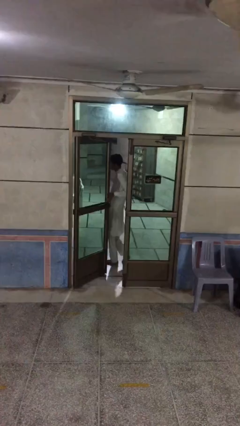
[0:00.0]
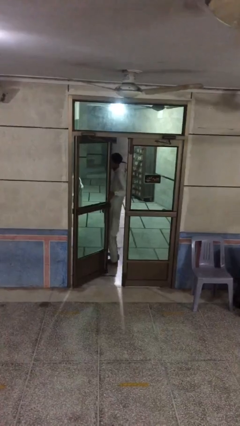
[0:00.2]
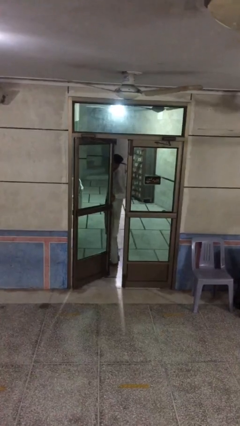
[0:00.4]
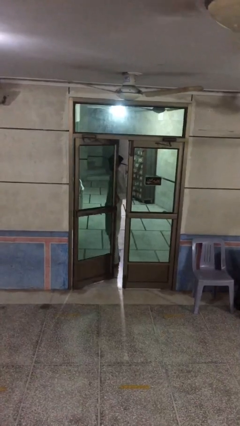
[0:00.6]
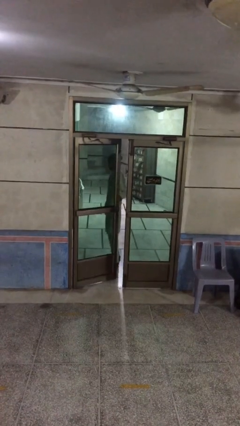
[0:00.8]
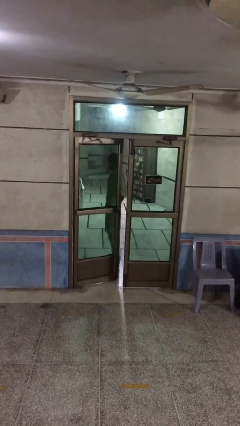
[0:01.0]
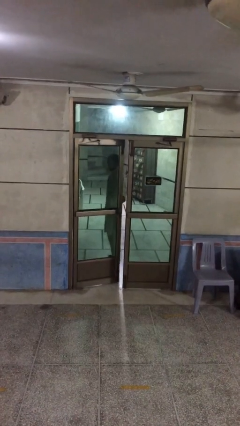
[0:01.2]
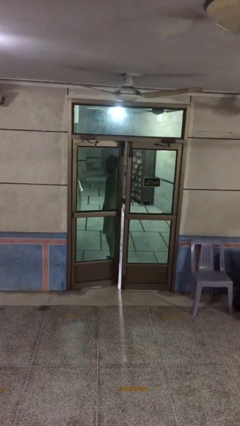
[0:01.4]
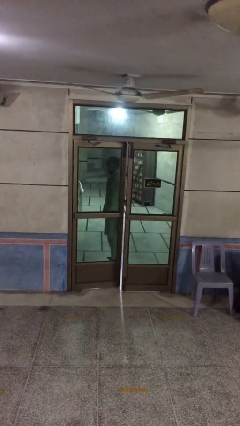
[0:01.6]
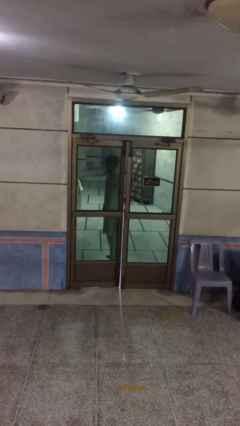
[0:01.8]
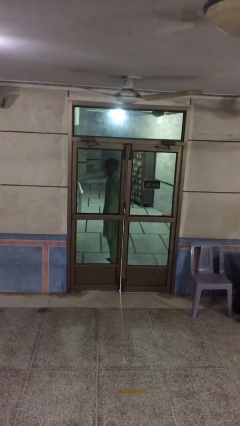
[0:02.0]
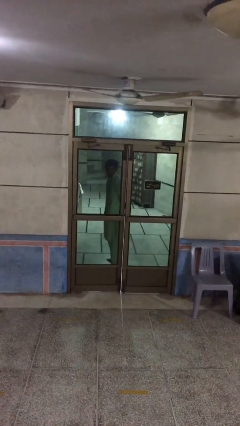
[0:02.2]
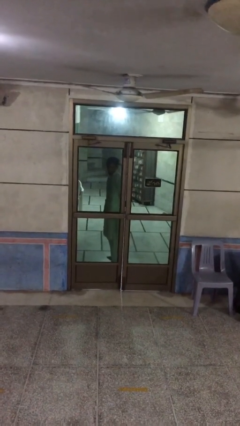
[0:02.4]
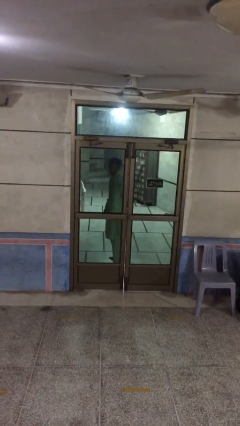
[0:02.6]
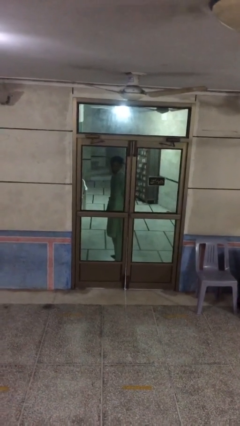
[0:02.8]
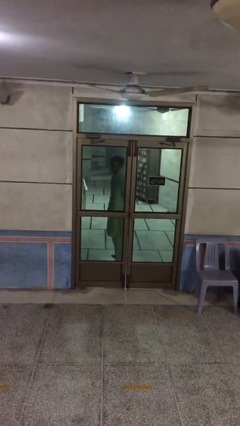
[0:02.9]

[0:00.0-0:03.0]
person closes facility door

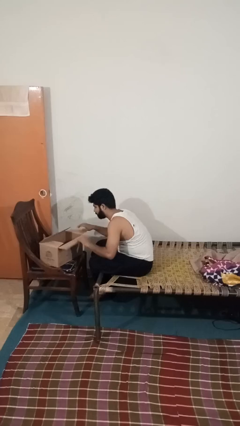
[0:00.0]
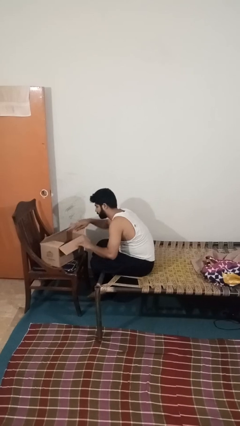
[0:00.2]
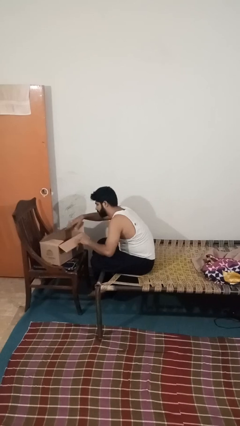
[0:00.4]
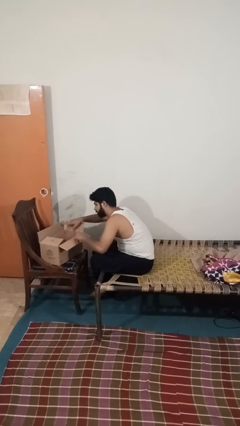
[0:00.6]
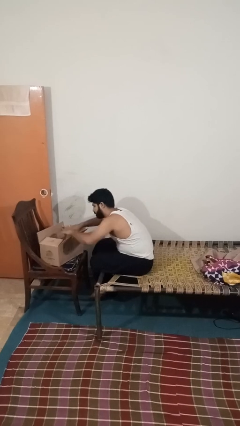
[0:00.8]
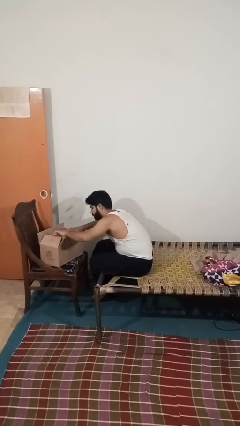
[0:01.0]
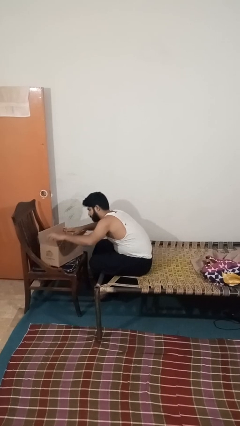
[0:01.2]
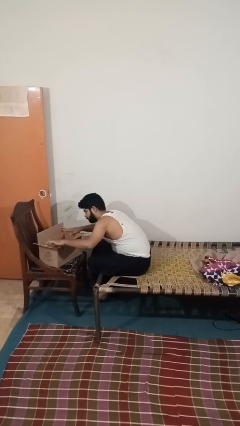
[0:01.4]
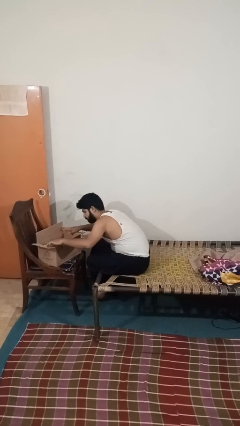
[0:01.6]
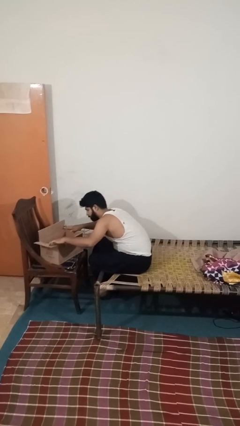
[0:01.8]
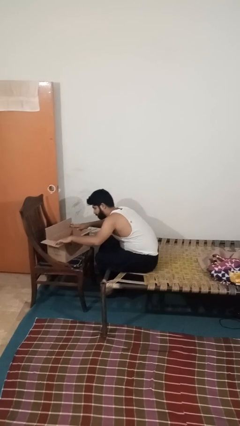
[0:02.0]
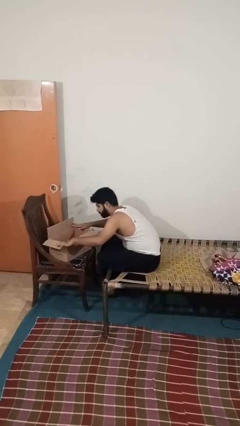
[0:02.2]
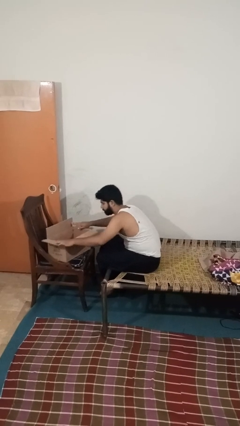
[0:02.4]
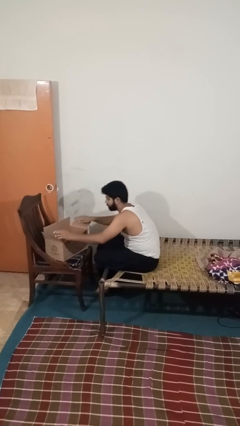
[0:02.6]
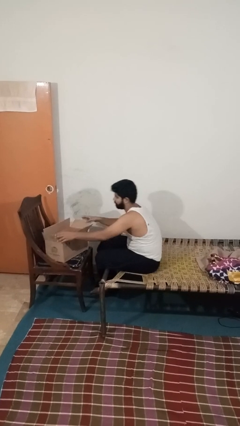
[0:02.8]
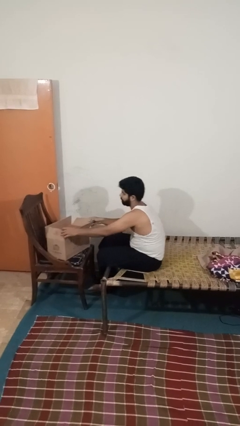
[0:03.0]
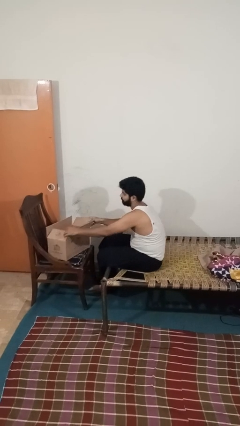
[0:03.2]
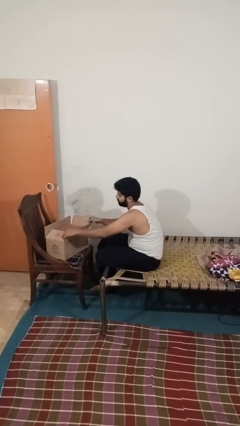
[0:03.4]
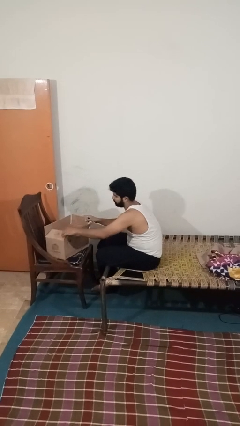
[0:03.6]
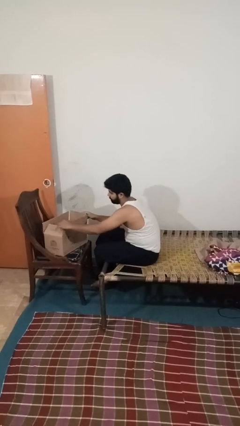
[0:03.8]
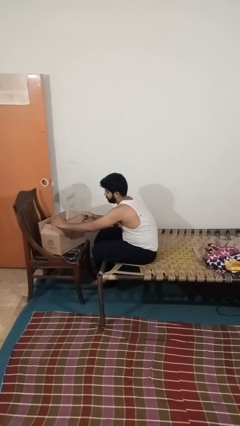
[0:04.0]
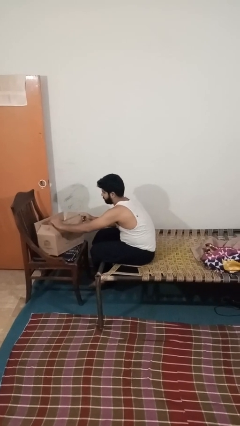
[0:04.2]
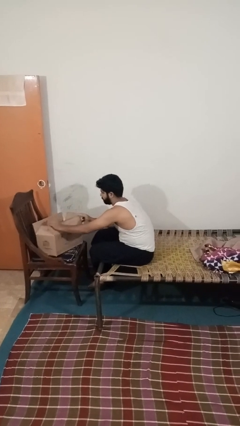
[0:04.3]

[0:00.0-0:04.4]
person opens box

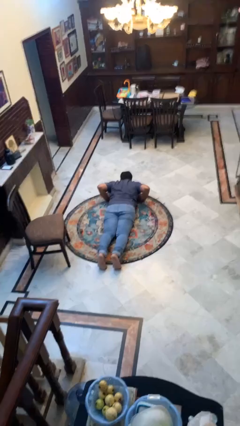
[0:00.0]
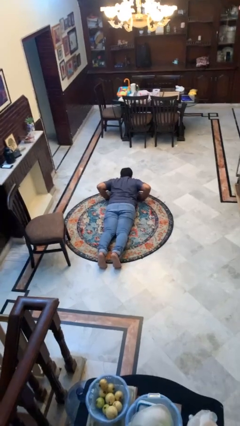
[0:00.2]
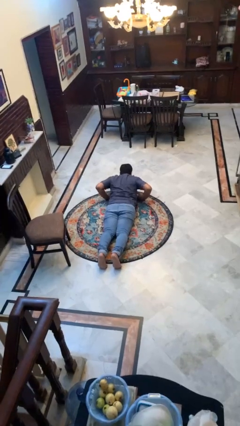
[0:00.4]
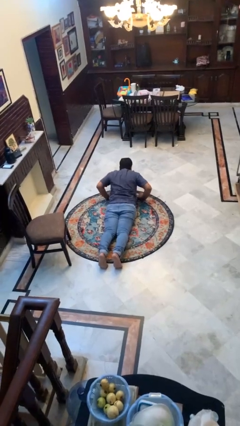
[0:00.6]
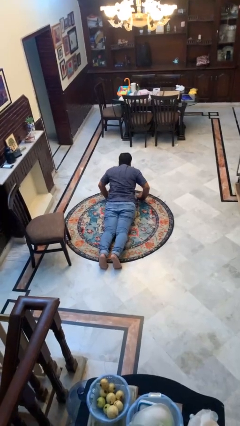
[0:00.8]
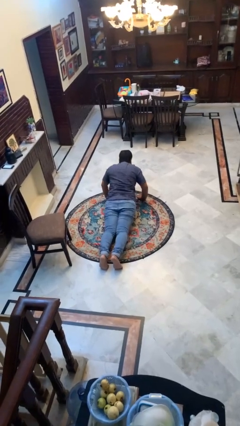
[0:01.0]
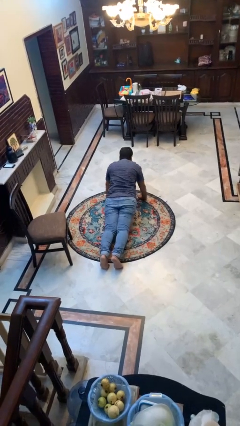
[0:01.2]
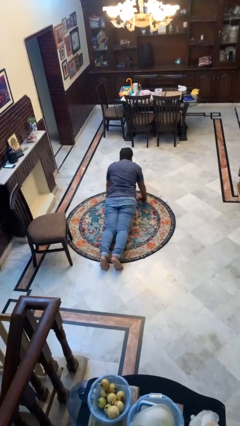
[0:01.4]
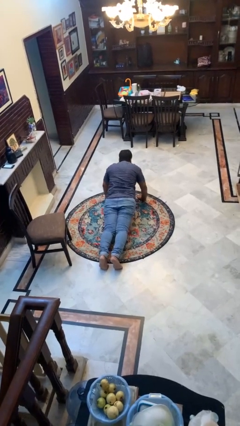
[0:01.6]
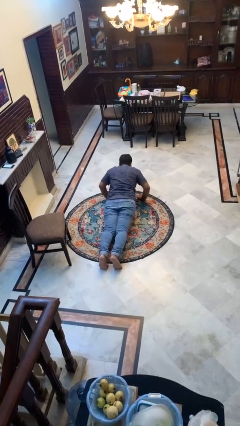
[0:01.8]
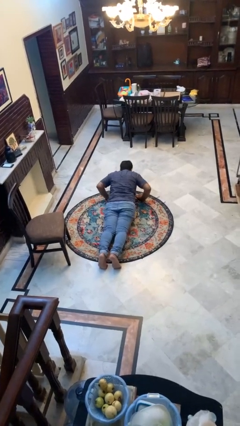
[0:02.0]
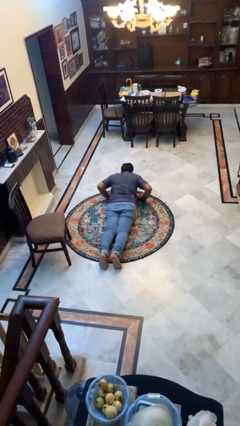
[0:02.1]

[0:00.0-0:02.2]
person exercises with pushup

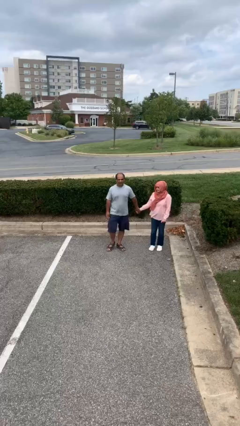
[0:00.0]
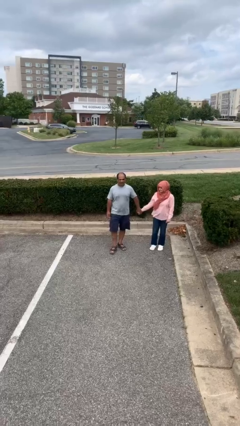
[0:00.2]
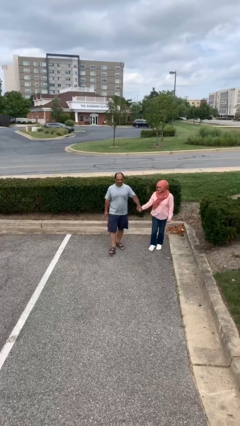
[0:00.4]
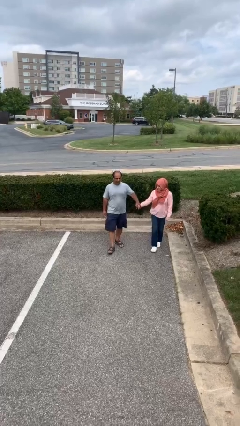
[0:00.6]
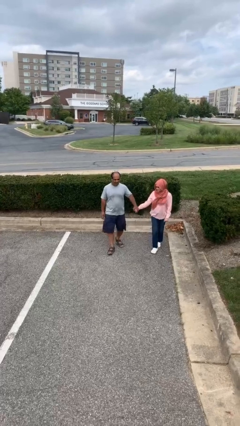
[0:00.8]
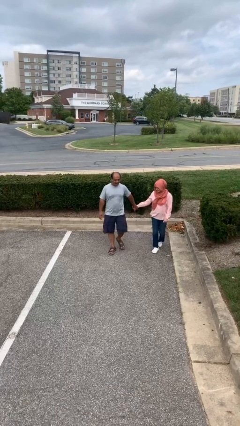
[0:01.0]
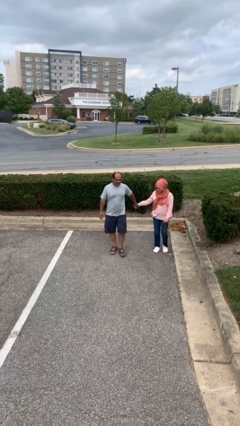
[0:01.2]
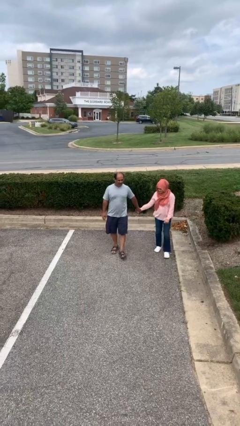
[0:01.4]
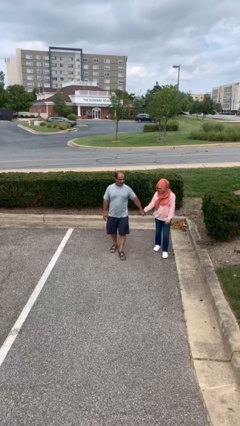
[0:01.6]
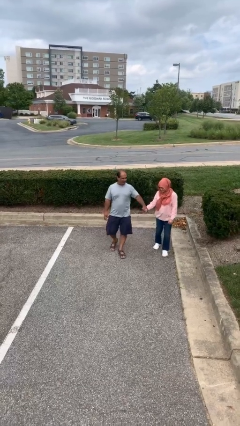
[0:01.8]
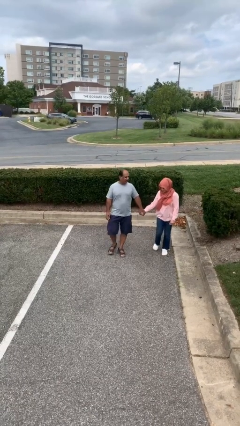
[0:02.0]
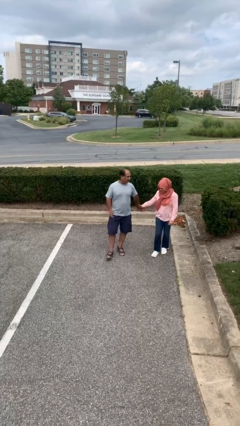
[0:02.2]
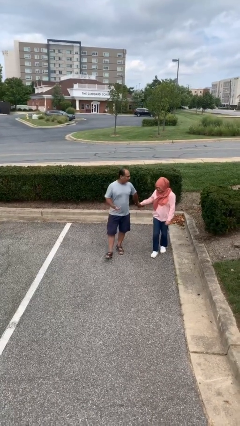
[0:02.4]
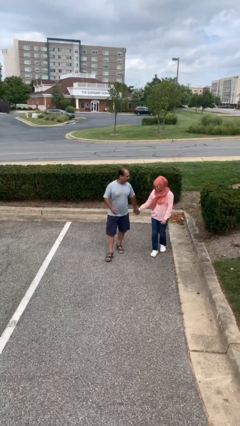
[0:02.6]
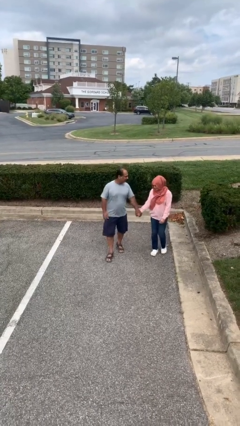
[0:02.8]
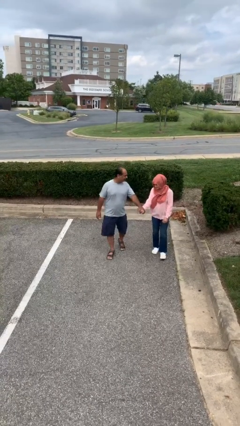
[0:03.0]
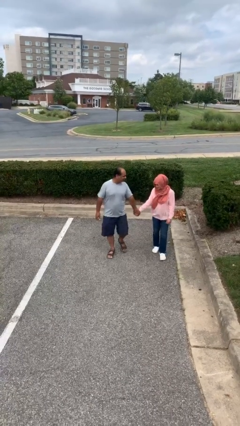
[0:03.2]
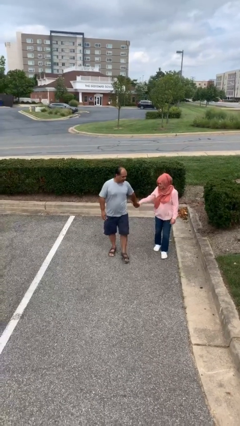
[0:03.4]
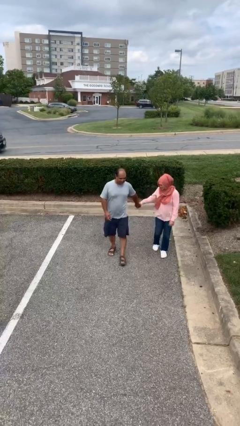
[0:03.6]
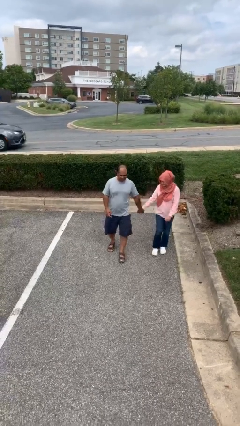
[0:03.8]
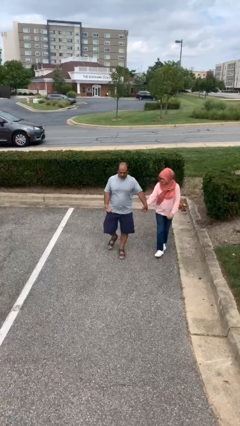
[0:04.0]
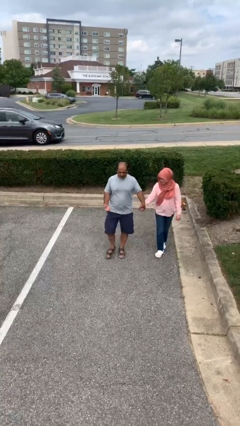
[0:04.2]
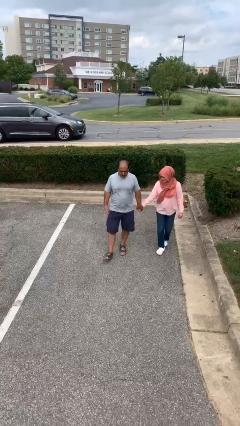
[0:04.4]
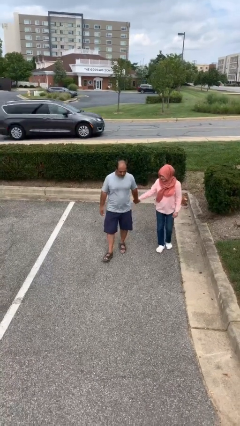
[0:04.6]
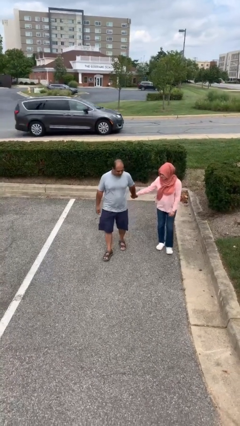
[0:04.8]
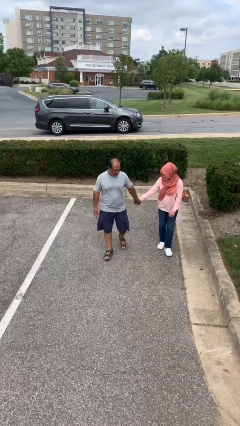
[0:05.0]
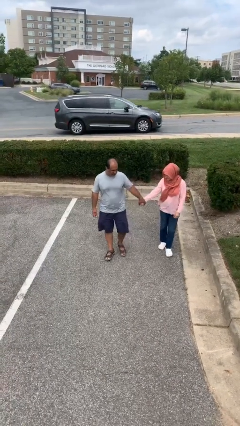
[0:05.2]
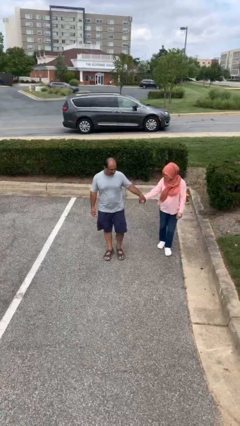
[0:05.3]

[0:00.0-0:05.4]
person holds hand

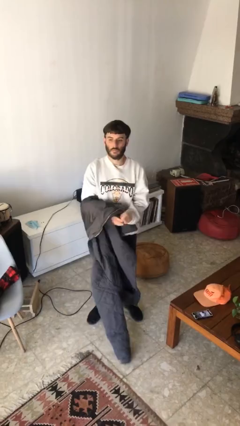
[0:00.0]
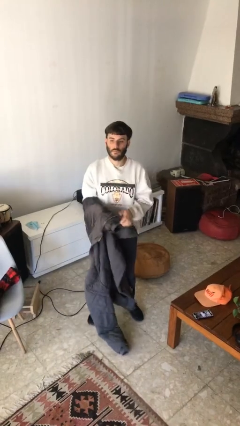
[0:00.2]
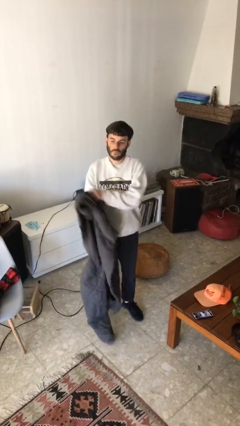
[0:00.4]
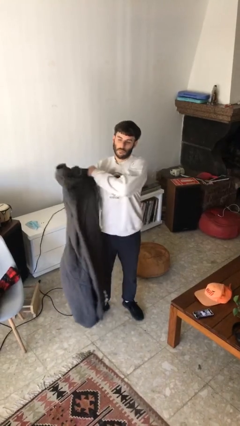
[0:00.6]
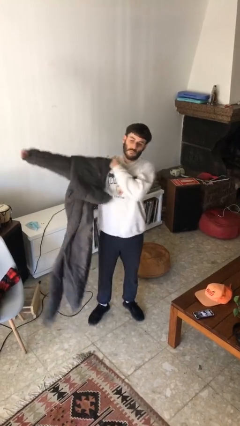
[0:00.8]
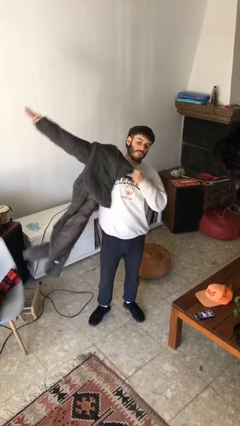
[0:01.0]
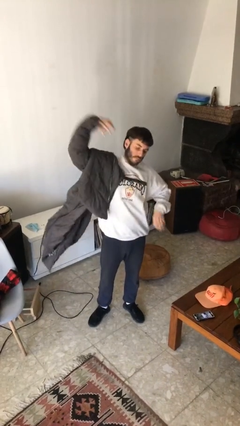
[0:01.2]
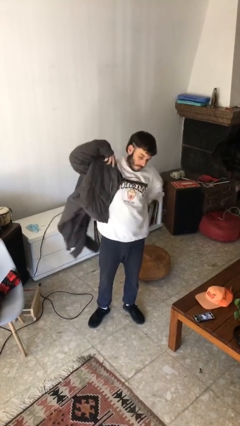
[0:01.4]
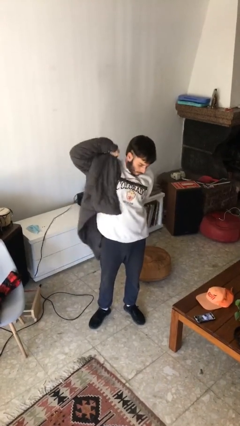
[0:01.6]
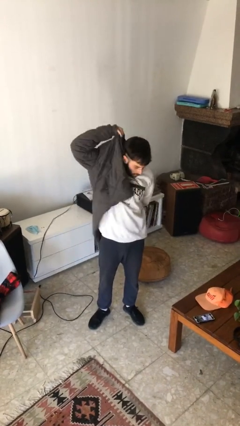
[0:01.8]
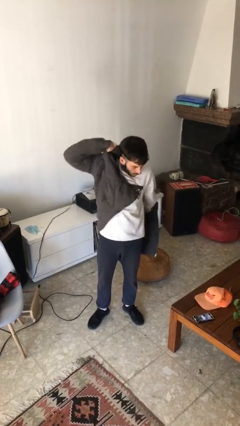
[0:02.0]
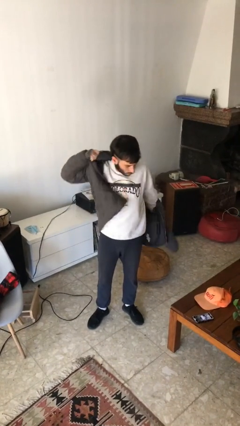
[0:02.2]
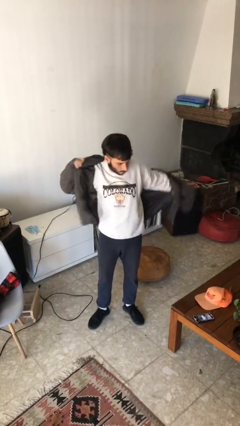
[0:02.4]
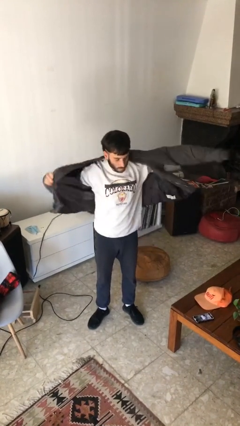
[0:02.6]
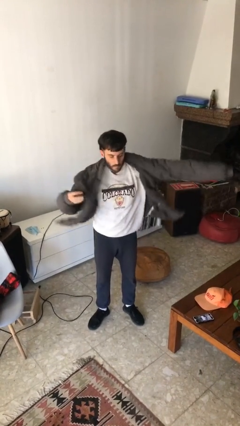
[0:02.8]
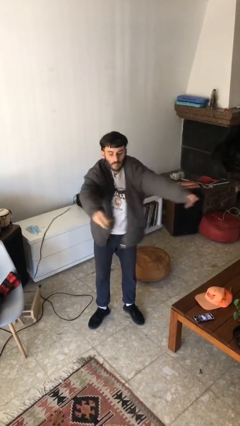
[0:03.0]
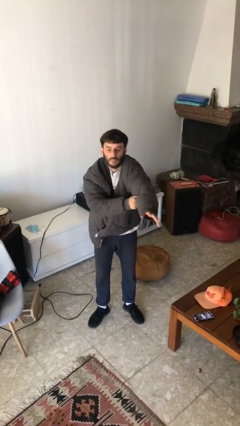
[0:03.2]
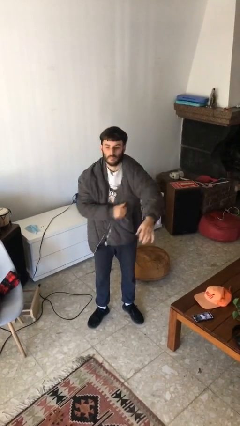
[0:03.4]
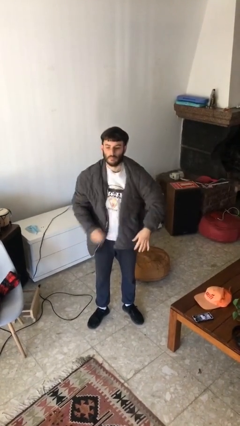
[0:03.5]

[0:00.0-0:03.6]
person puts on jacket
